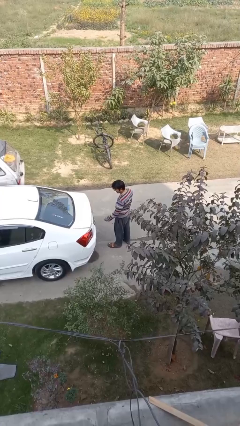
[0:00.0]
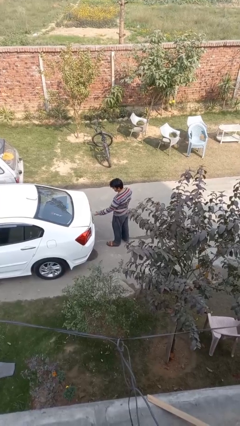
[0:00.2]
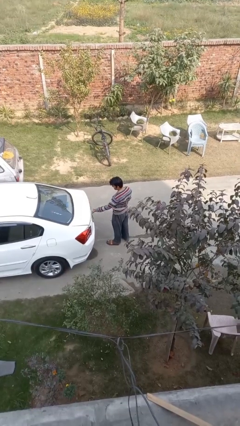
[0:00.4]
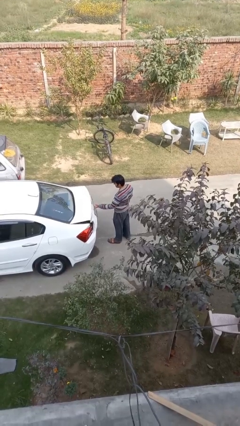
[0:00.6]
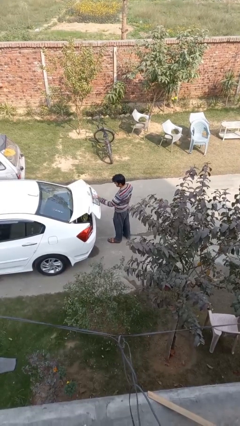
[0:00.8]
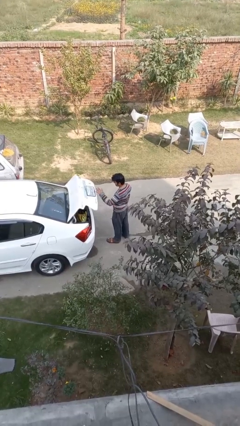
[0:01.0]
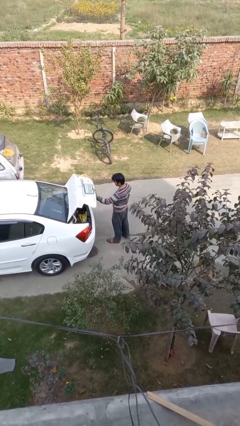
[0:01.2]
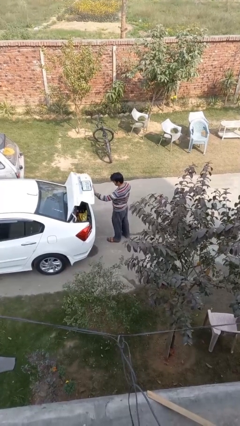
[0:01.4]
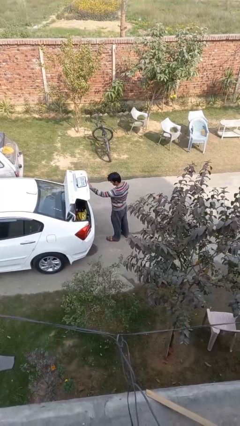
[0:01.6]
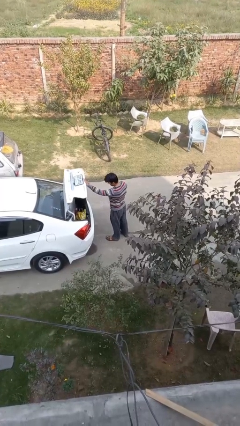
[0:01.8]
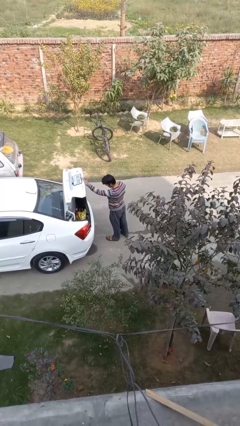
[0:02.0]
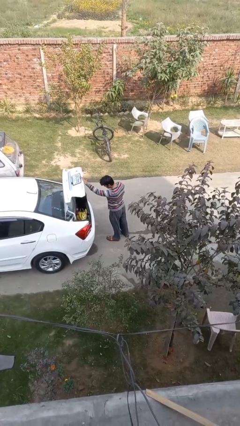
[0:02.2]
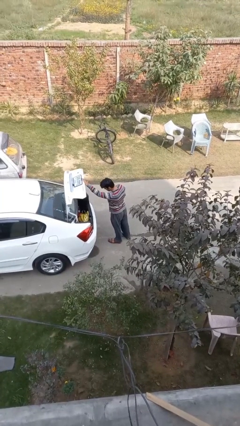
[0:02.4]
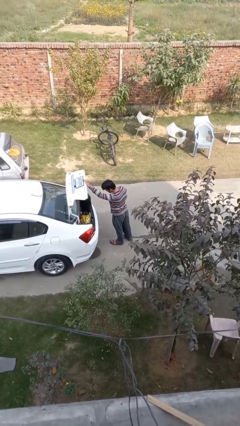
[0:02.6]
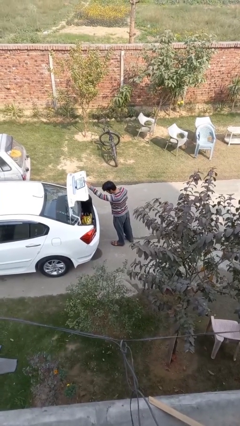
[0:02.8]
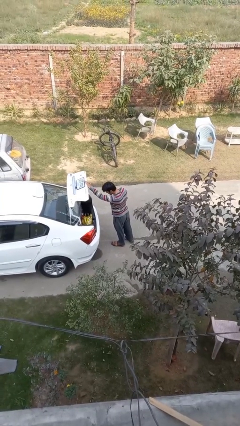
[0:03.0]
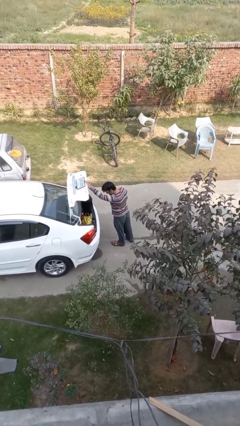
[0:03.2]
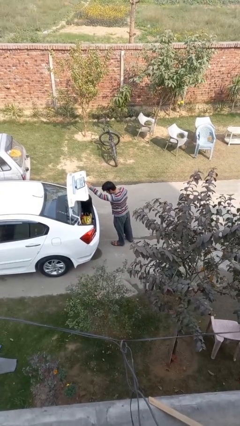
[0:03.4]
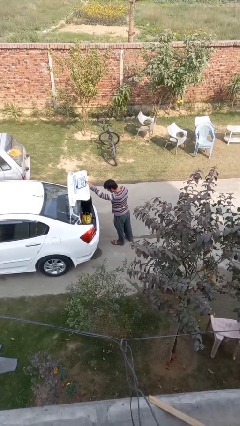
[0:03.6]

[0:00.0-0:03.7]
person opens car trunk

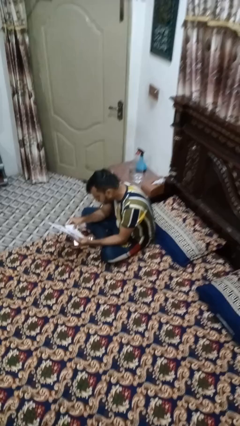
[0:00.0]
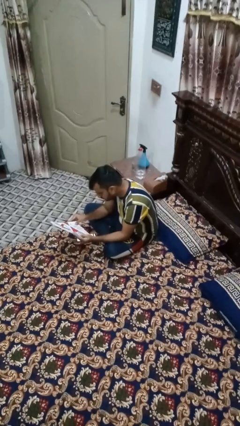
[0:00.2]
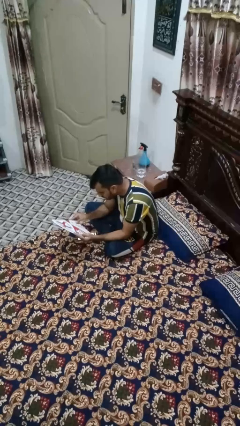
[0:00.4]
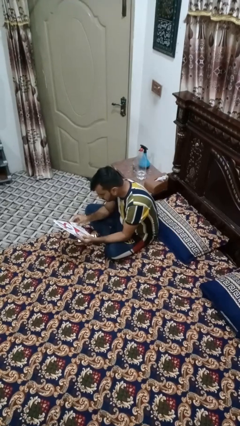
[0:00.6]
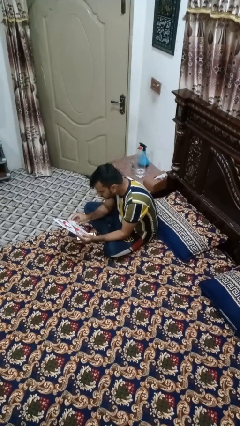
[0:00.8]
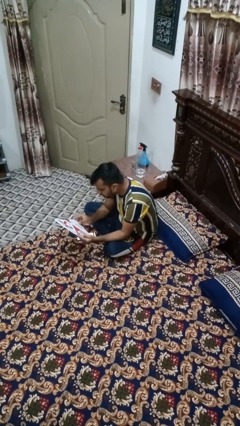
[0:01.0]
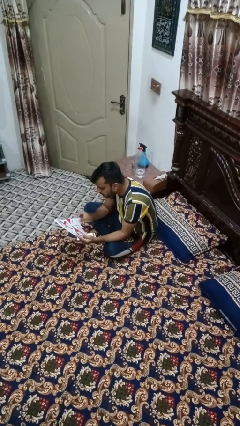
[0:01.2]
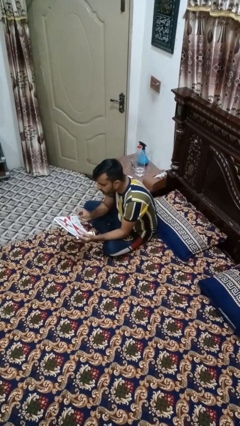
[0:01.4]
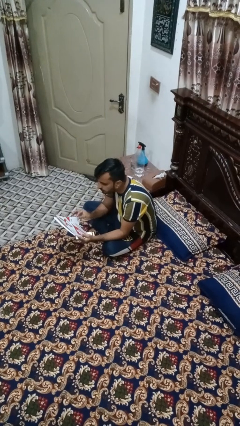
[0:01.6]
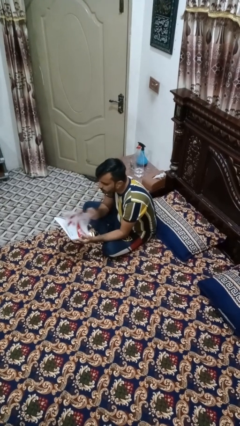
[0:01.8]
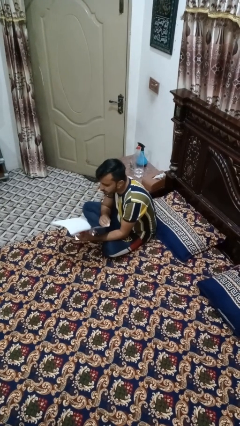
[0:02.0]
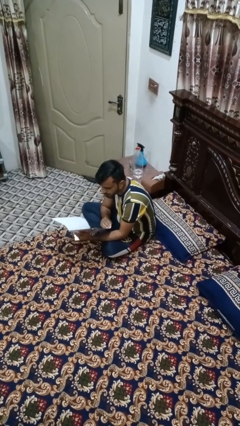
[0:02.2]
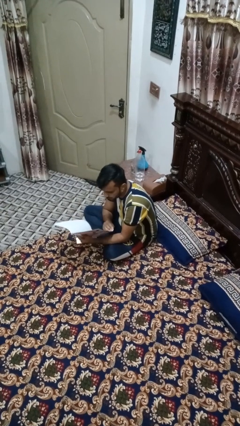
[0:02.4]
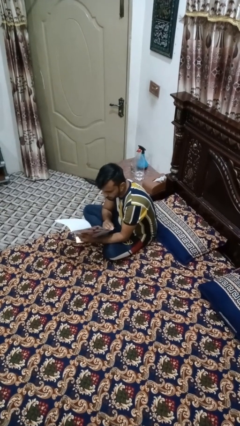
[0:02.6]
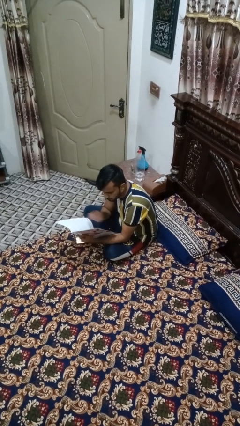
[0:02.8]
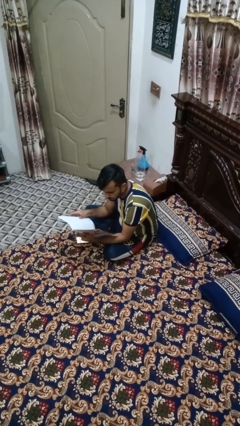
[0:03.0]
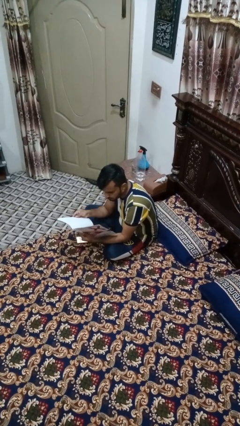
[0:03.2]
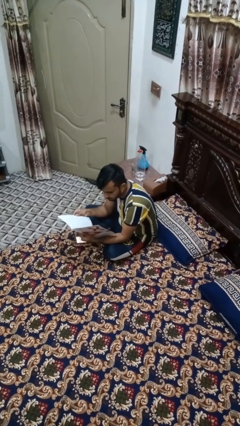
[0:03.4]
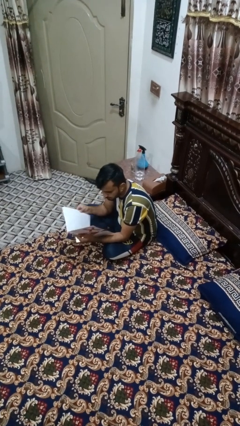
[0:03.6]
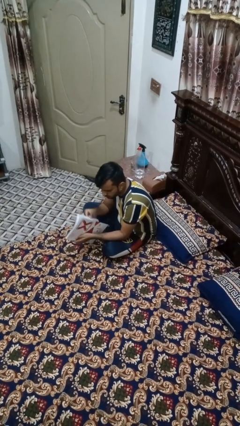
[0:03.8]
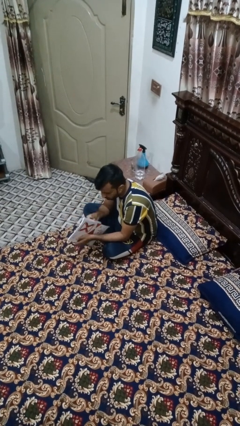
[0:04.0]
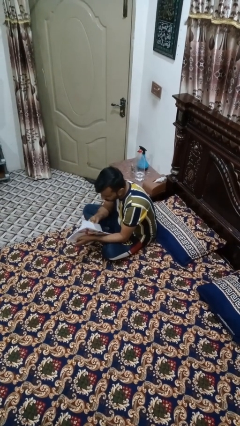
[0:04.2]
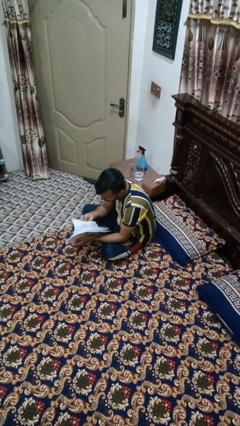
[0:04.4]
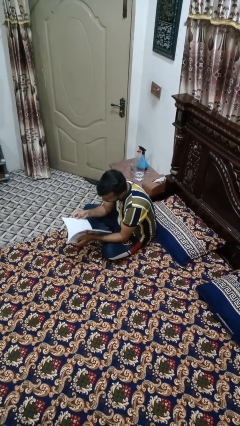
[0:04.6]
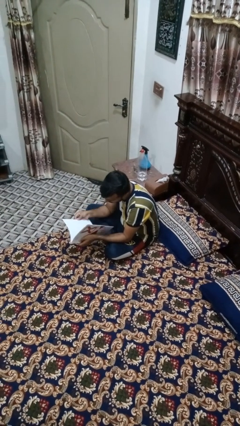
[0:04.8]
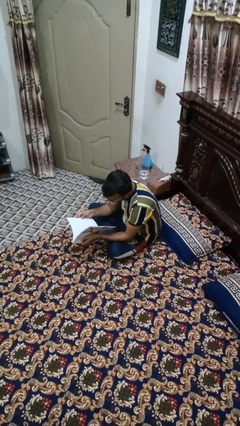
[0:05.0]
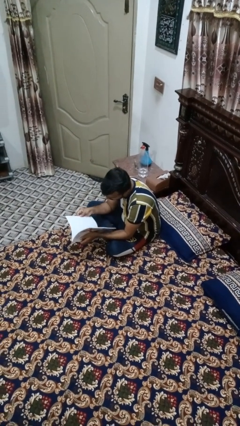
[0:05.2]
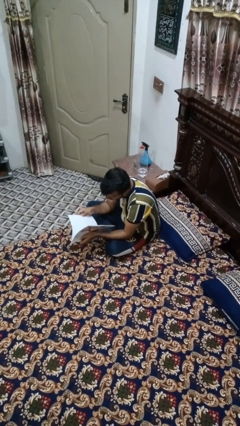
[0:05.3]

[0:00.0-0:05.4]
person reads magazine

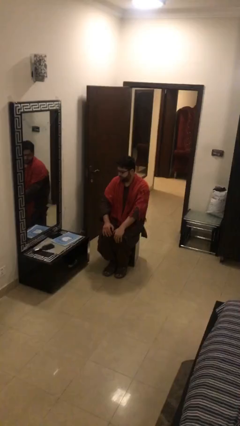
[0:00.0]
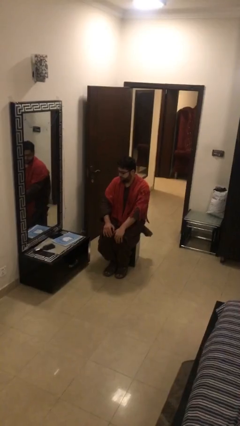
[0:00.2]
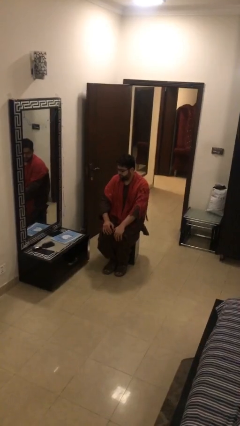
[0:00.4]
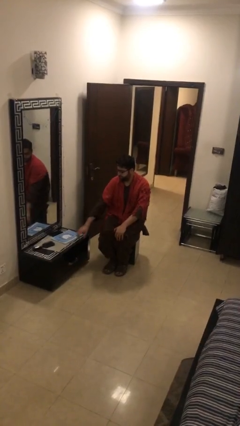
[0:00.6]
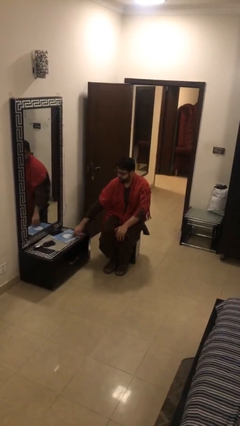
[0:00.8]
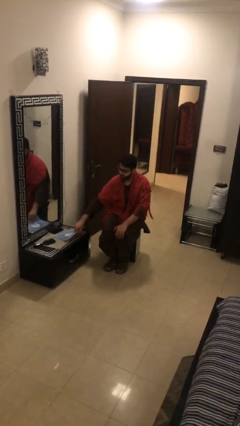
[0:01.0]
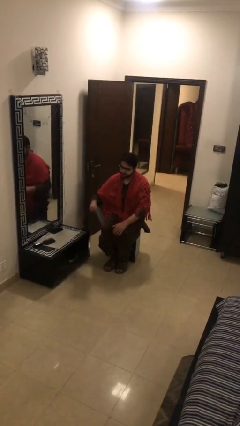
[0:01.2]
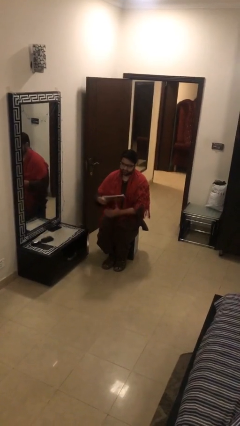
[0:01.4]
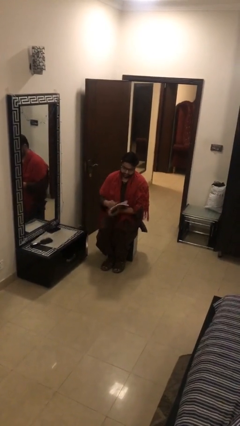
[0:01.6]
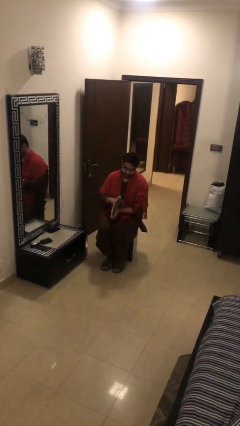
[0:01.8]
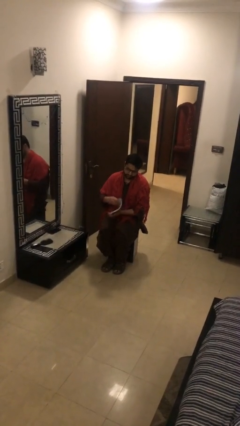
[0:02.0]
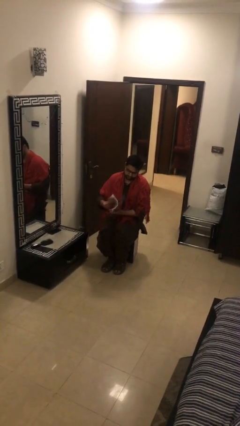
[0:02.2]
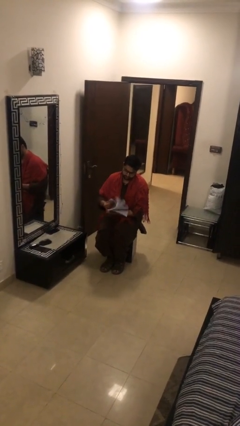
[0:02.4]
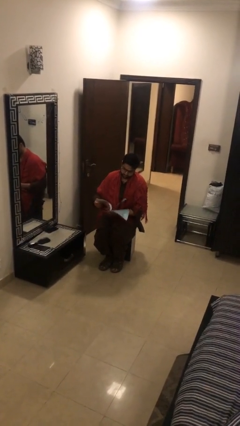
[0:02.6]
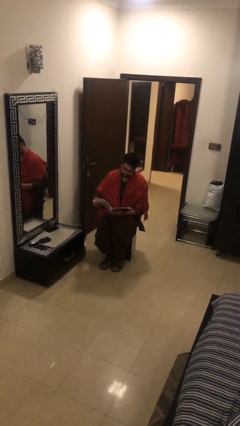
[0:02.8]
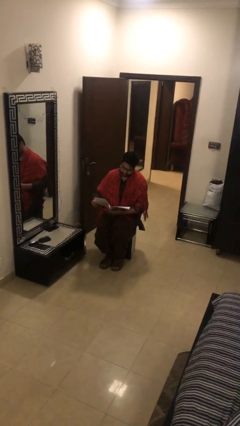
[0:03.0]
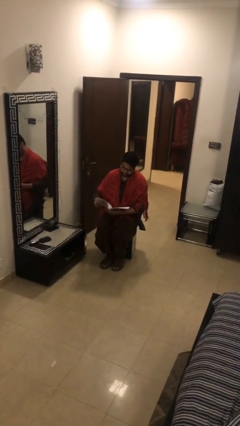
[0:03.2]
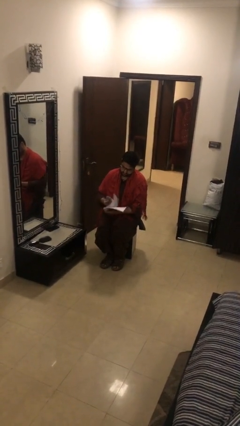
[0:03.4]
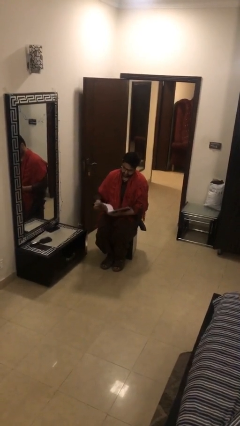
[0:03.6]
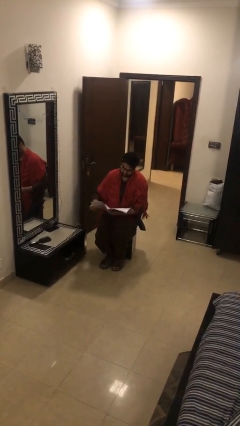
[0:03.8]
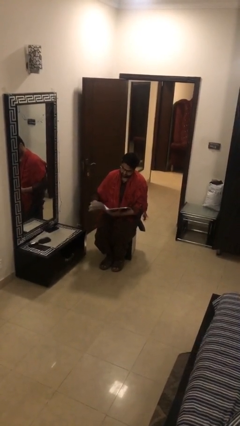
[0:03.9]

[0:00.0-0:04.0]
person reads document

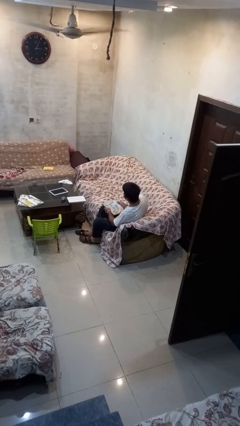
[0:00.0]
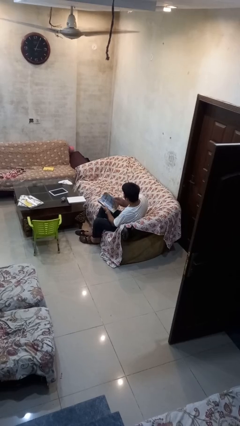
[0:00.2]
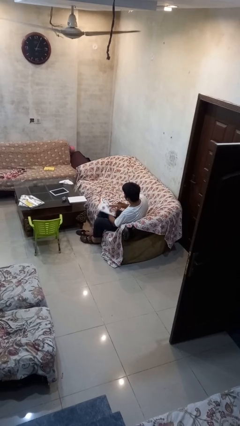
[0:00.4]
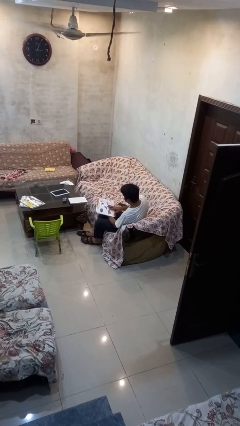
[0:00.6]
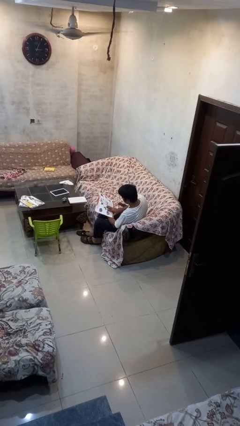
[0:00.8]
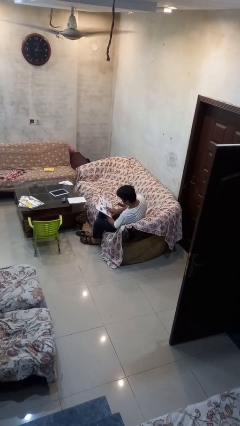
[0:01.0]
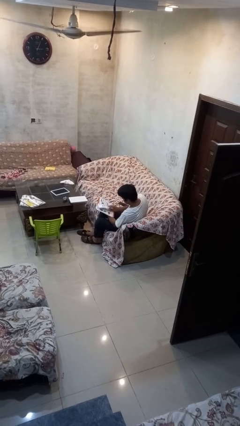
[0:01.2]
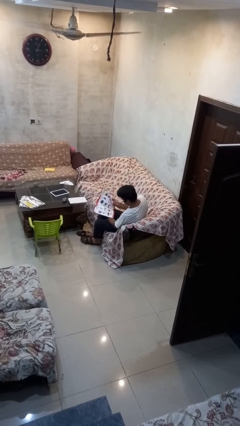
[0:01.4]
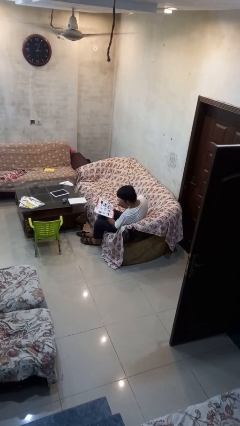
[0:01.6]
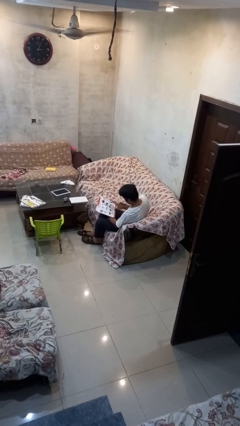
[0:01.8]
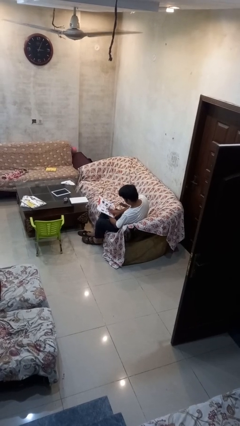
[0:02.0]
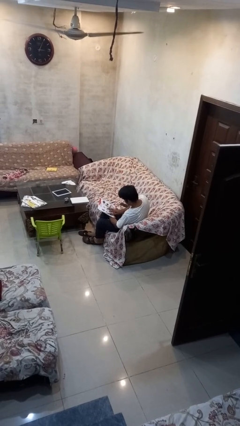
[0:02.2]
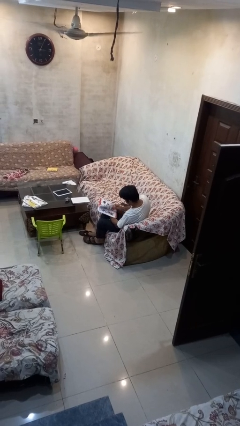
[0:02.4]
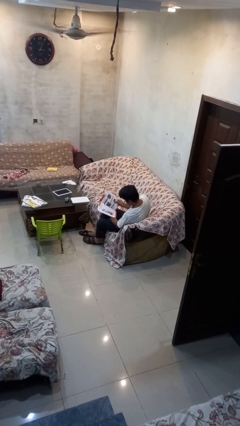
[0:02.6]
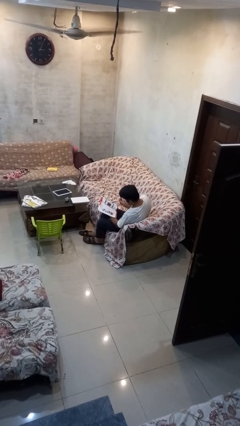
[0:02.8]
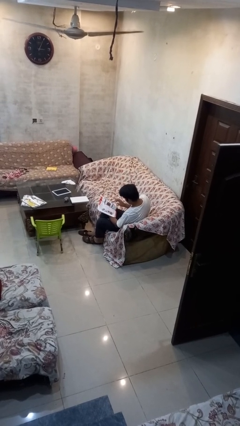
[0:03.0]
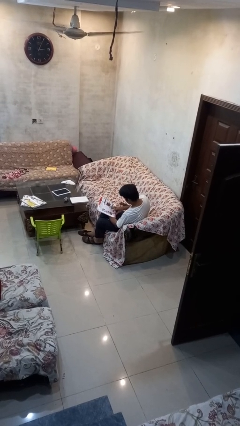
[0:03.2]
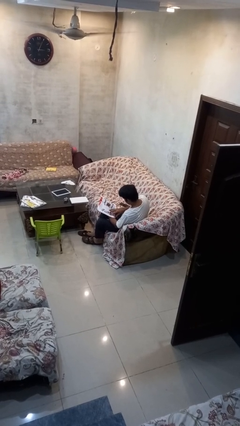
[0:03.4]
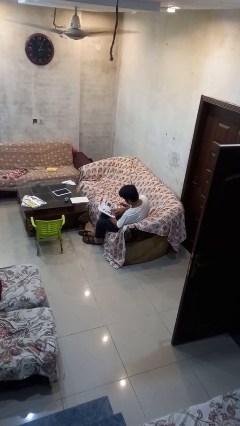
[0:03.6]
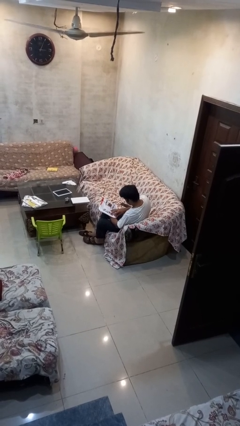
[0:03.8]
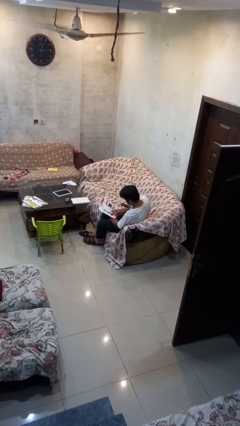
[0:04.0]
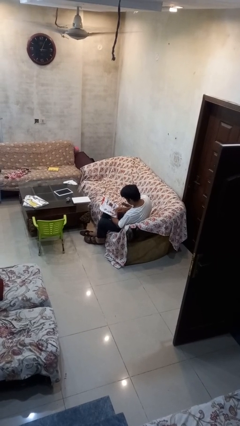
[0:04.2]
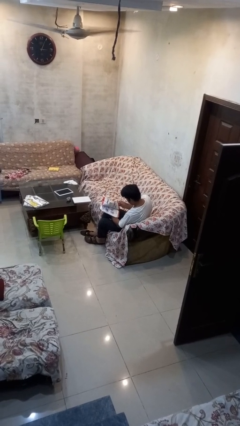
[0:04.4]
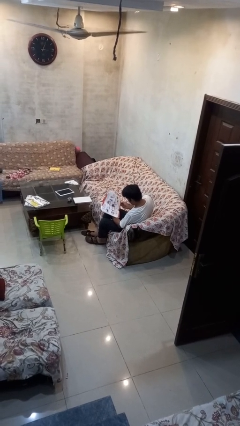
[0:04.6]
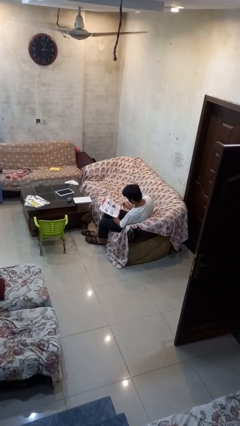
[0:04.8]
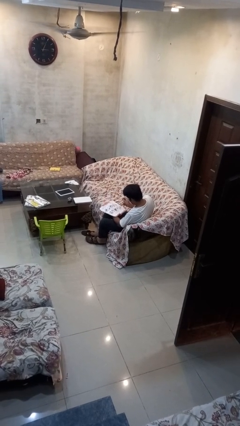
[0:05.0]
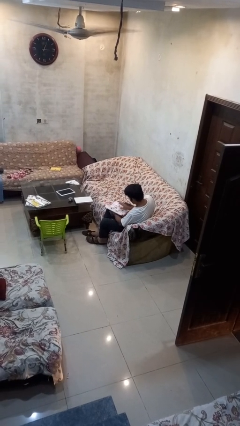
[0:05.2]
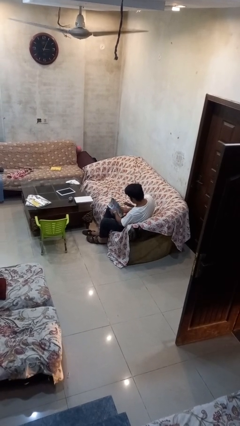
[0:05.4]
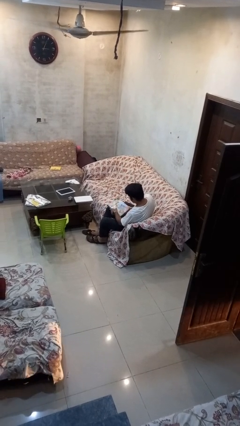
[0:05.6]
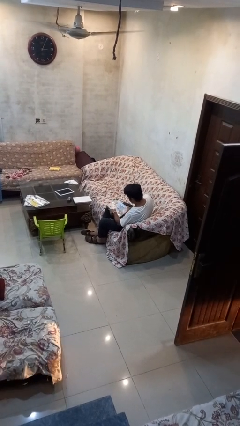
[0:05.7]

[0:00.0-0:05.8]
person reads book
